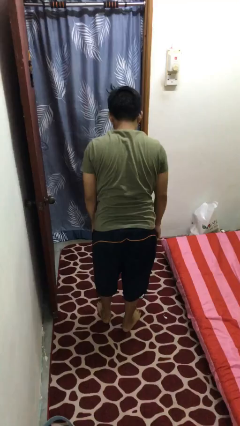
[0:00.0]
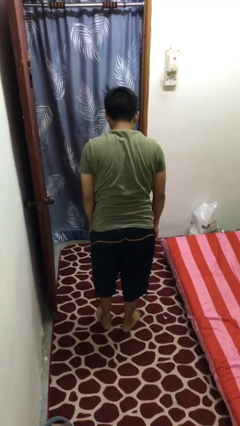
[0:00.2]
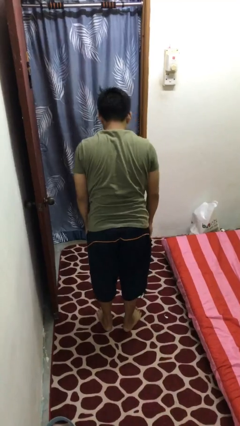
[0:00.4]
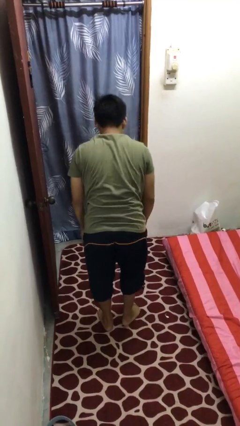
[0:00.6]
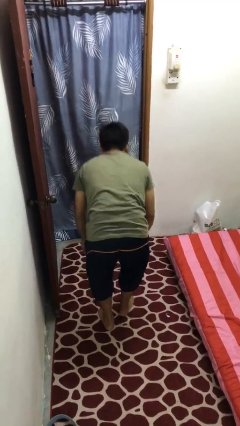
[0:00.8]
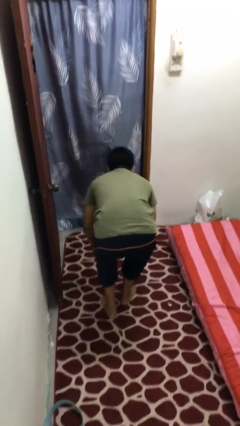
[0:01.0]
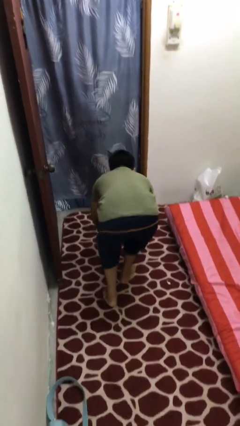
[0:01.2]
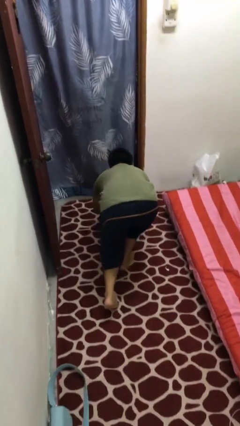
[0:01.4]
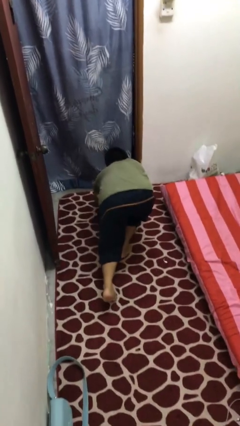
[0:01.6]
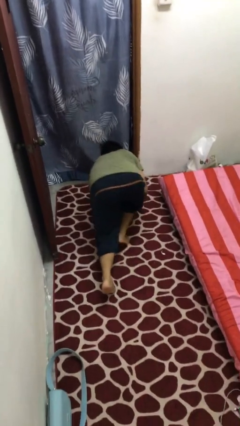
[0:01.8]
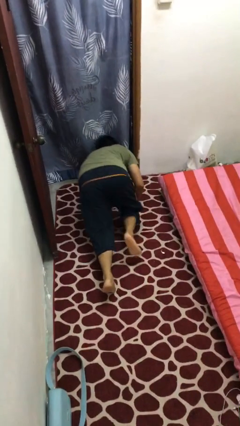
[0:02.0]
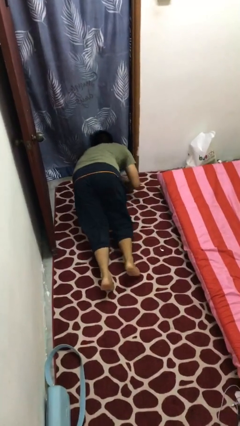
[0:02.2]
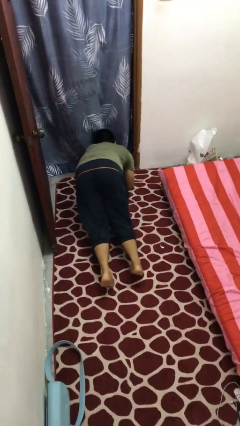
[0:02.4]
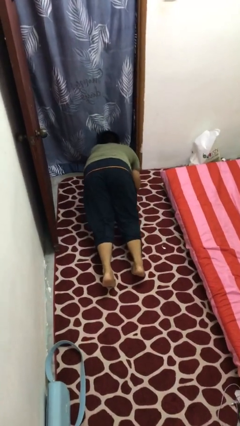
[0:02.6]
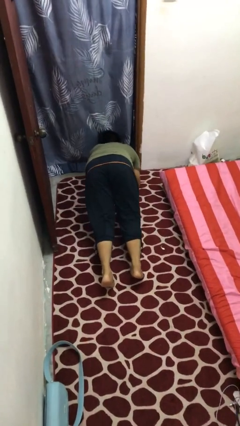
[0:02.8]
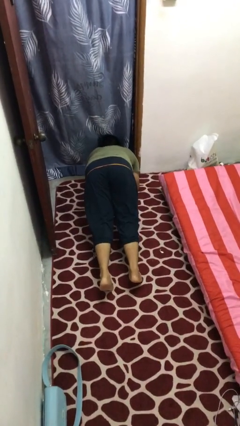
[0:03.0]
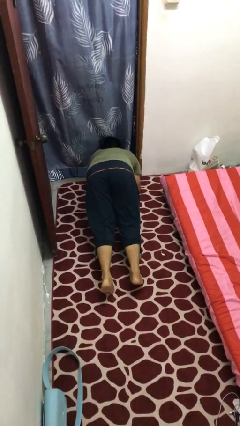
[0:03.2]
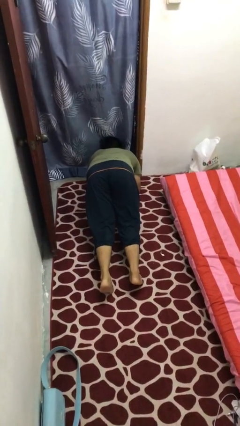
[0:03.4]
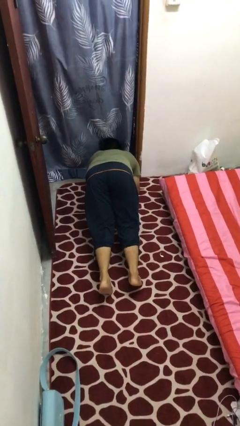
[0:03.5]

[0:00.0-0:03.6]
person exercises with plank

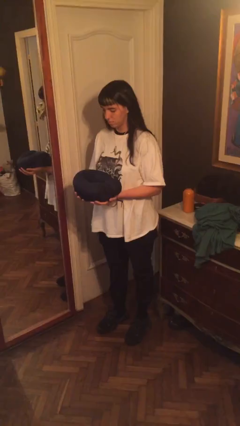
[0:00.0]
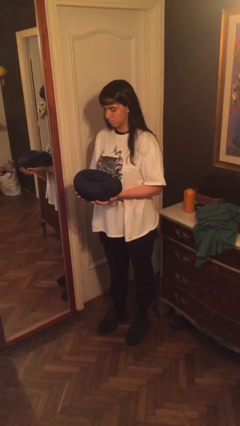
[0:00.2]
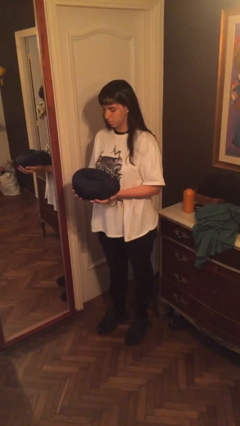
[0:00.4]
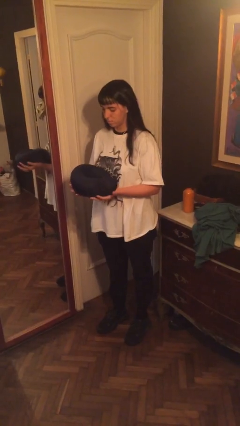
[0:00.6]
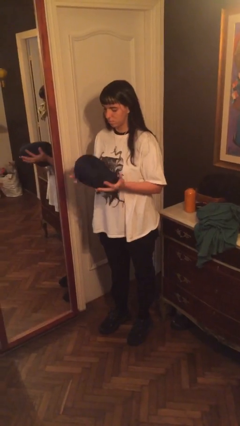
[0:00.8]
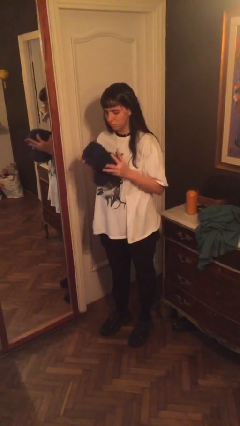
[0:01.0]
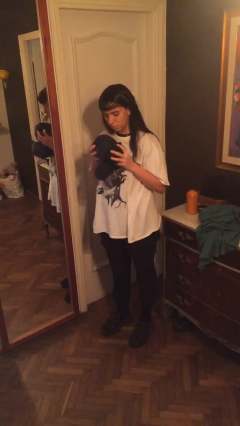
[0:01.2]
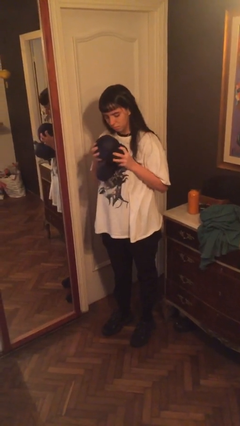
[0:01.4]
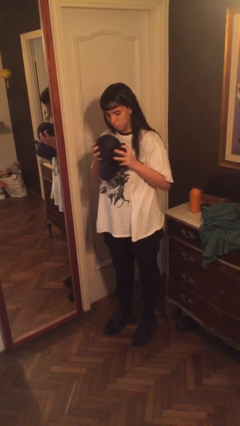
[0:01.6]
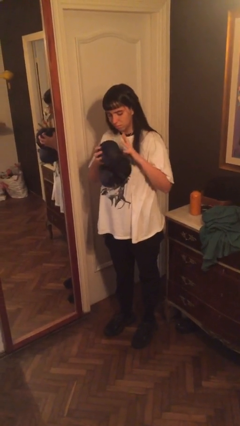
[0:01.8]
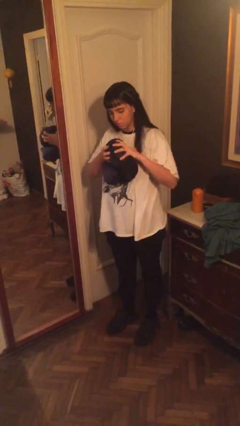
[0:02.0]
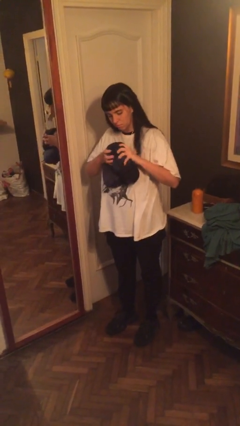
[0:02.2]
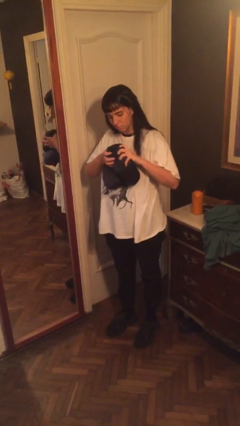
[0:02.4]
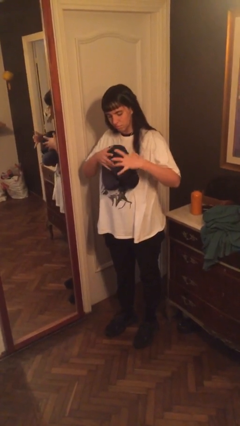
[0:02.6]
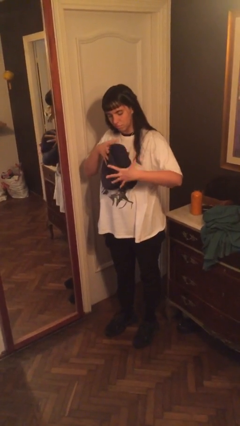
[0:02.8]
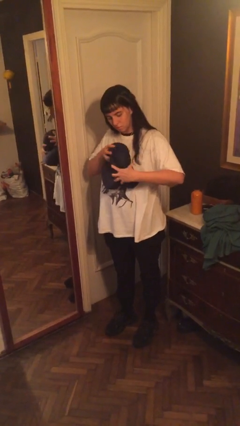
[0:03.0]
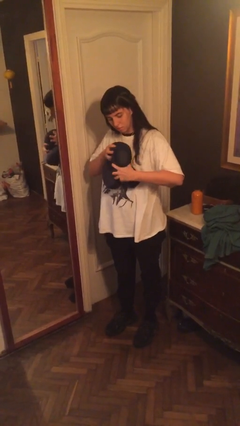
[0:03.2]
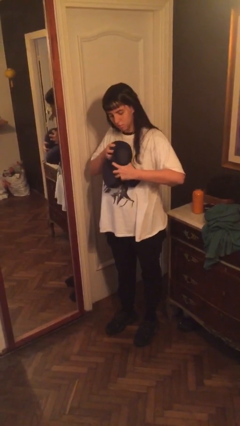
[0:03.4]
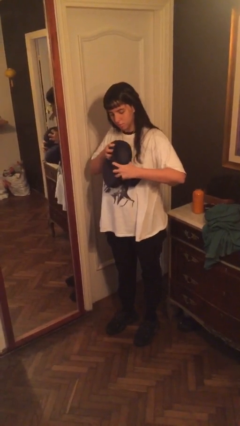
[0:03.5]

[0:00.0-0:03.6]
person squeezes object

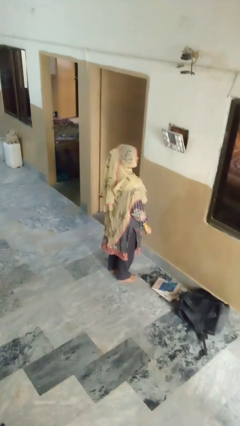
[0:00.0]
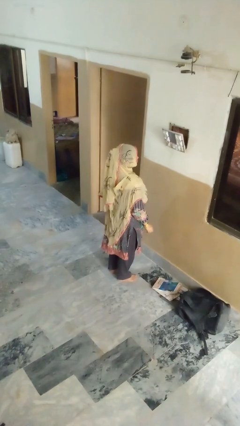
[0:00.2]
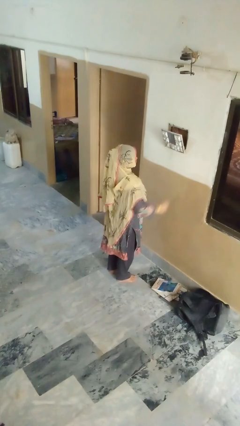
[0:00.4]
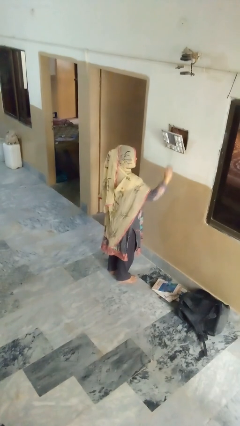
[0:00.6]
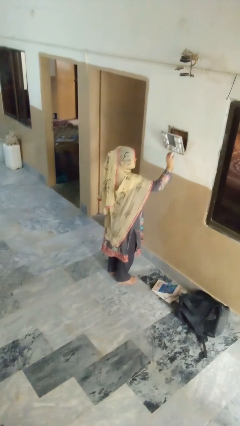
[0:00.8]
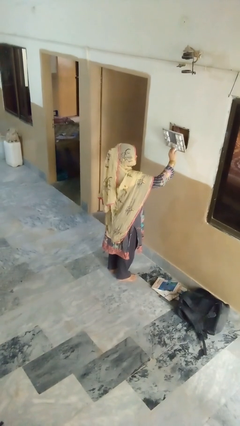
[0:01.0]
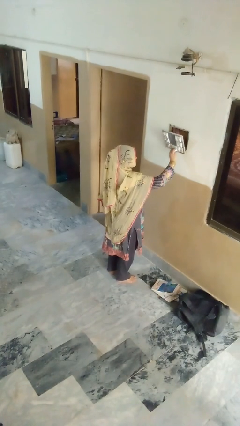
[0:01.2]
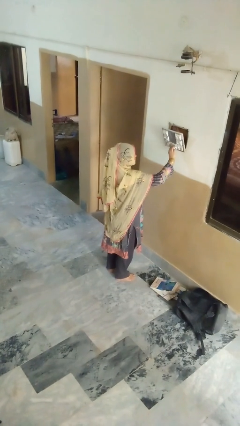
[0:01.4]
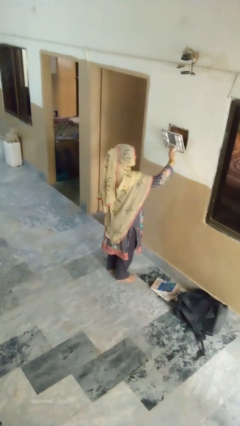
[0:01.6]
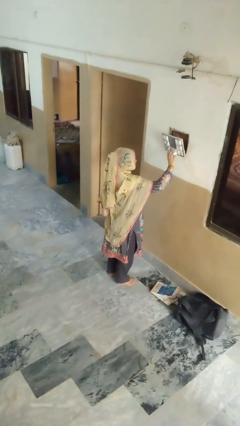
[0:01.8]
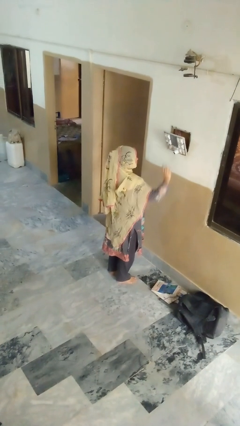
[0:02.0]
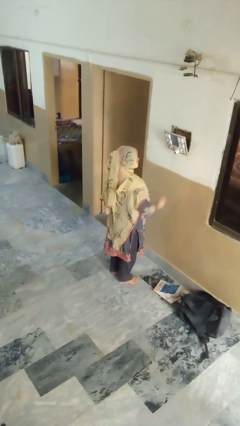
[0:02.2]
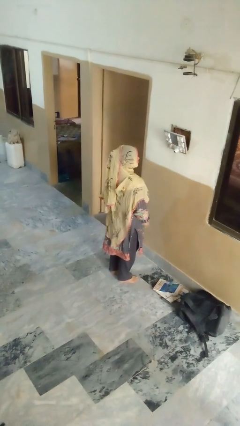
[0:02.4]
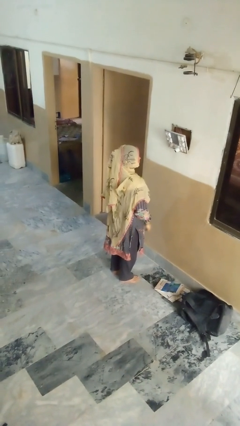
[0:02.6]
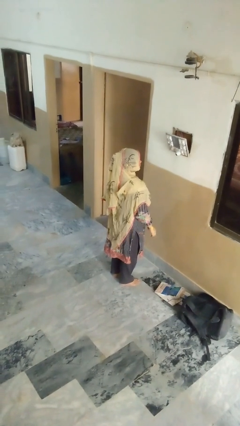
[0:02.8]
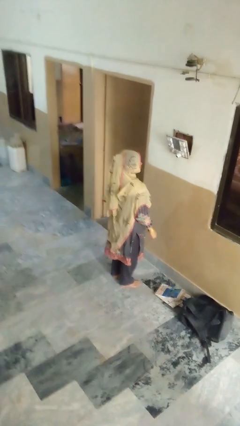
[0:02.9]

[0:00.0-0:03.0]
person plugs into electrical socket

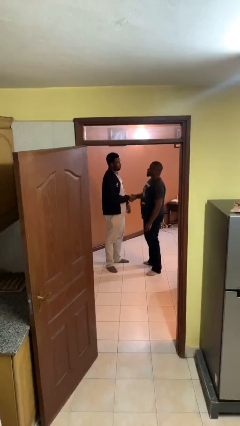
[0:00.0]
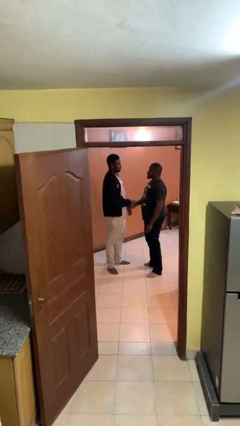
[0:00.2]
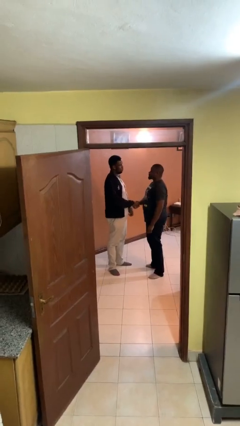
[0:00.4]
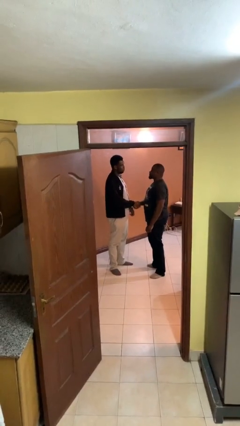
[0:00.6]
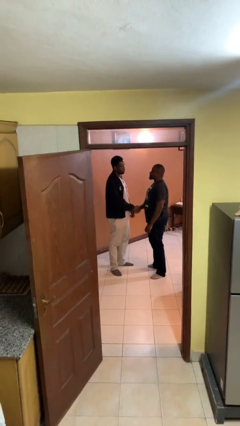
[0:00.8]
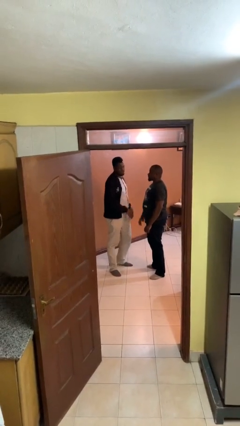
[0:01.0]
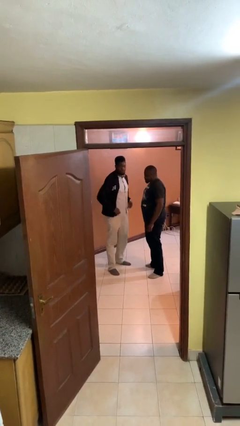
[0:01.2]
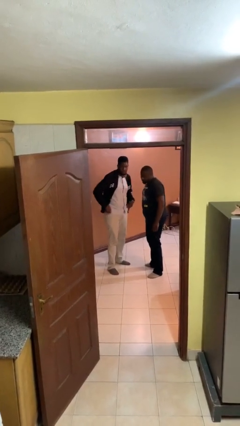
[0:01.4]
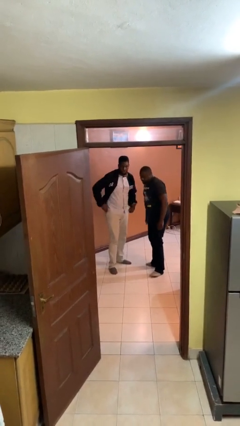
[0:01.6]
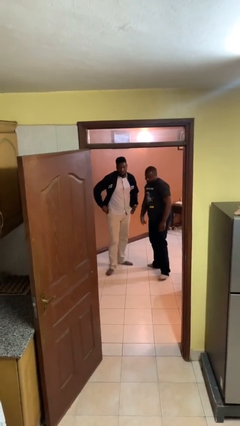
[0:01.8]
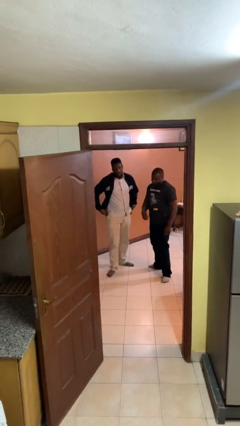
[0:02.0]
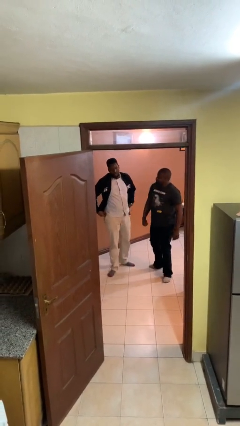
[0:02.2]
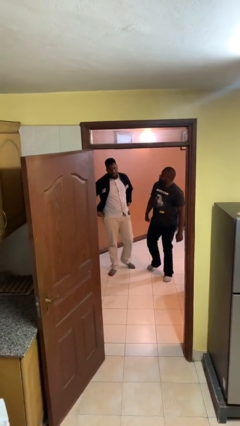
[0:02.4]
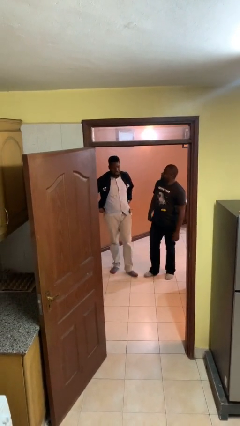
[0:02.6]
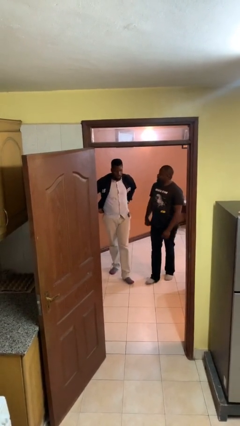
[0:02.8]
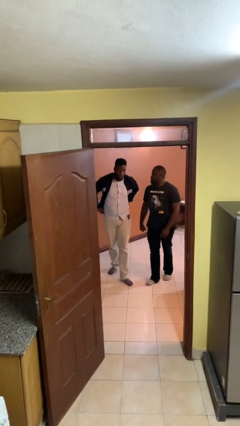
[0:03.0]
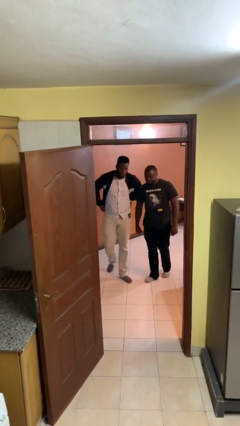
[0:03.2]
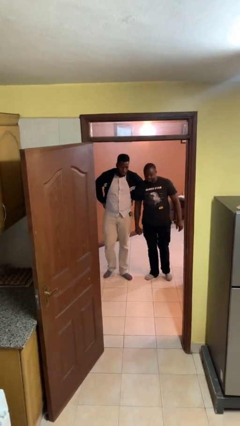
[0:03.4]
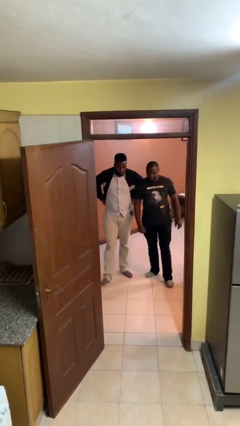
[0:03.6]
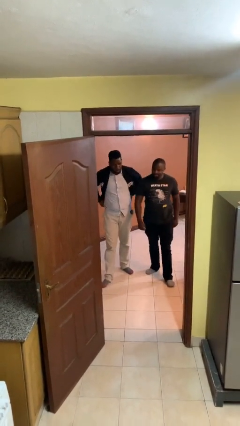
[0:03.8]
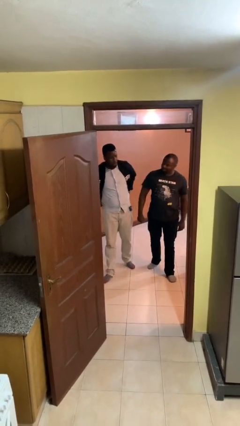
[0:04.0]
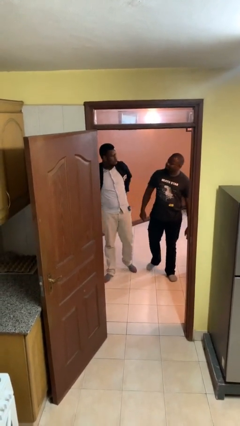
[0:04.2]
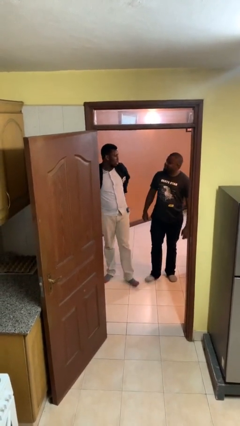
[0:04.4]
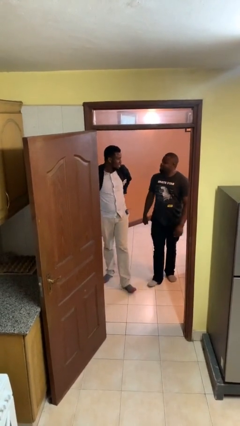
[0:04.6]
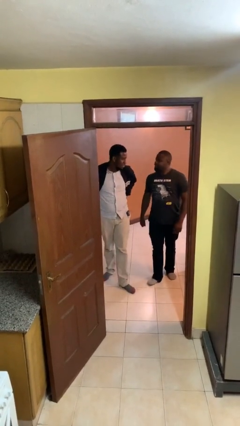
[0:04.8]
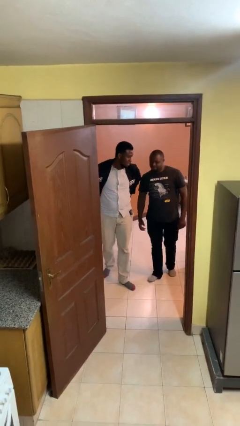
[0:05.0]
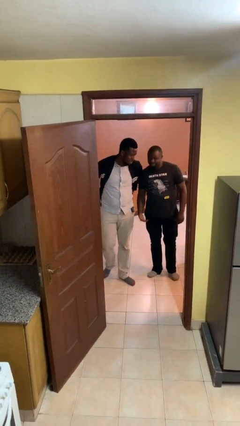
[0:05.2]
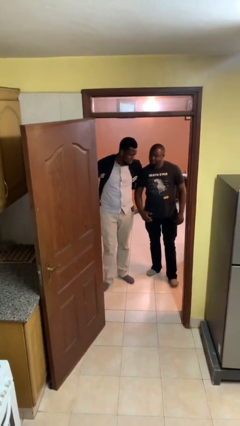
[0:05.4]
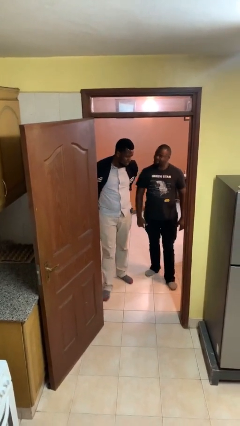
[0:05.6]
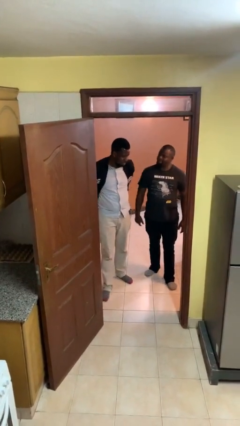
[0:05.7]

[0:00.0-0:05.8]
person talks to person

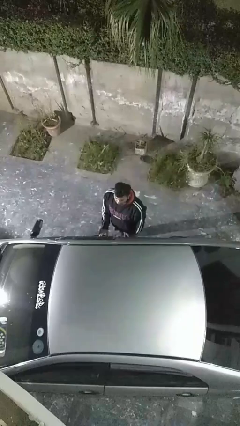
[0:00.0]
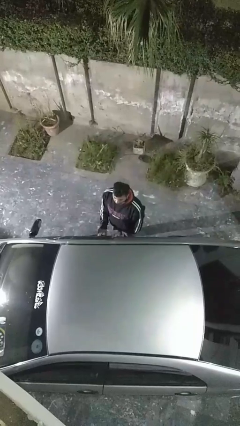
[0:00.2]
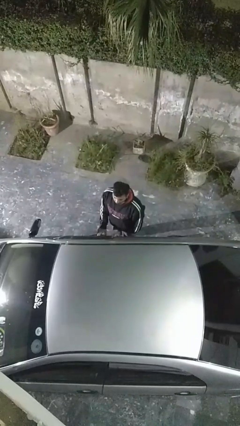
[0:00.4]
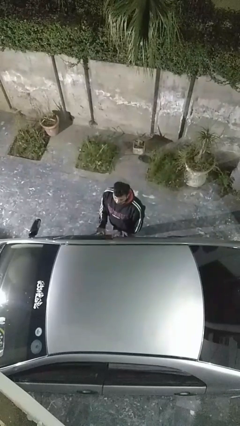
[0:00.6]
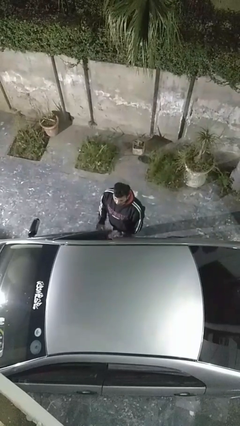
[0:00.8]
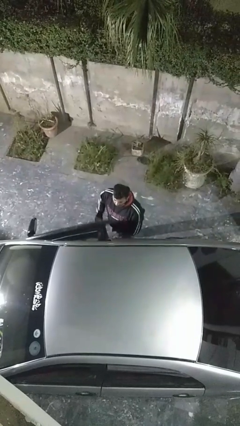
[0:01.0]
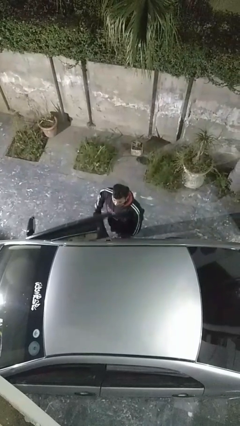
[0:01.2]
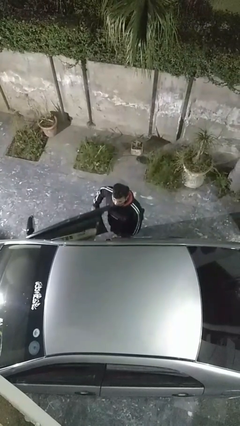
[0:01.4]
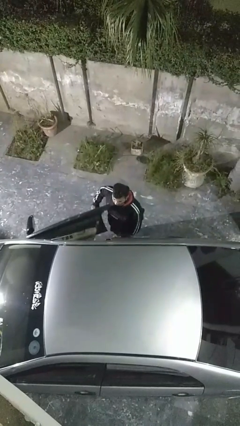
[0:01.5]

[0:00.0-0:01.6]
person opens car door
